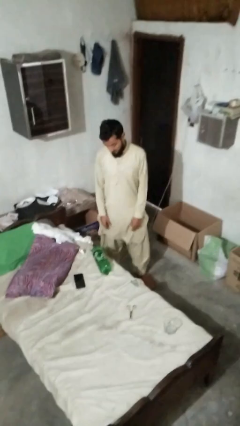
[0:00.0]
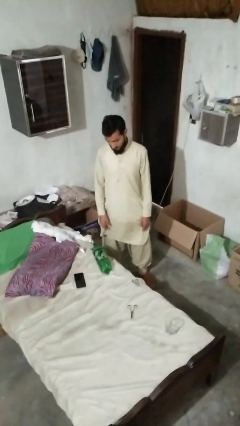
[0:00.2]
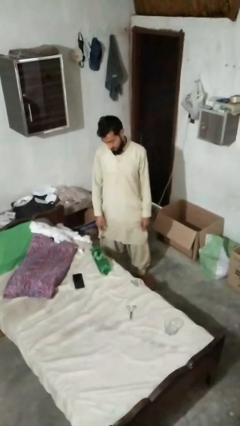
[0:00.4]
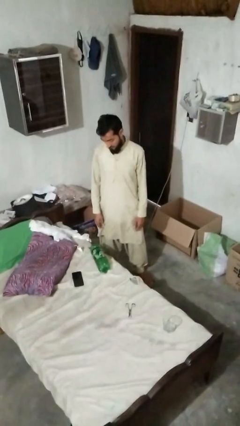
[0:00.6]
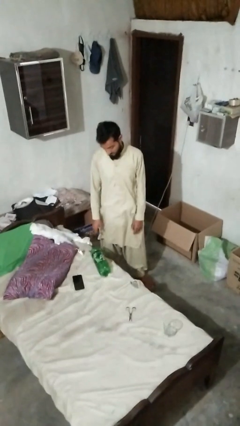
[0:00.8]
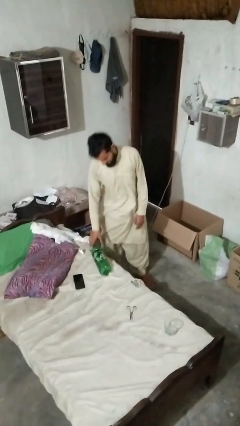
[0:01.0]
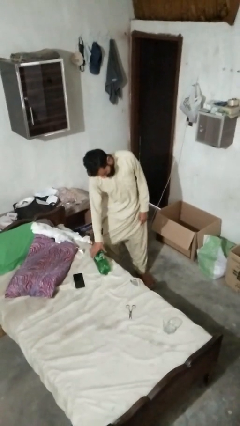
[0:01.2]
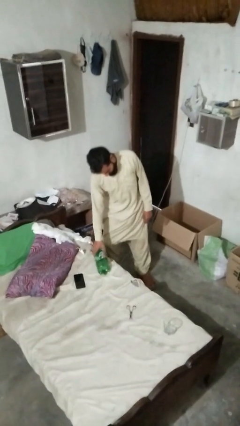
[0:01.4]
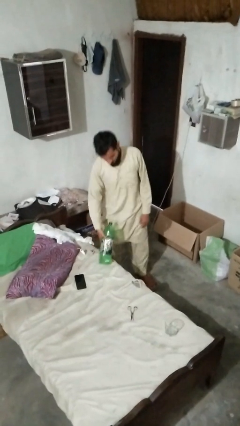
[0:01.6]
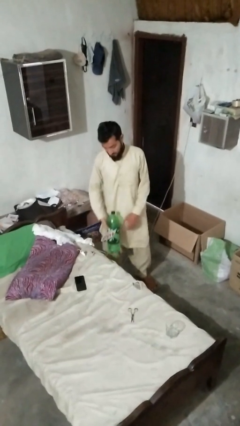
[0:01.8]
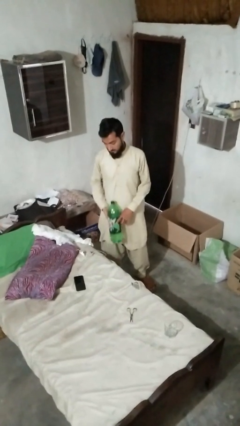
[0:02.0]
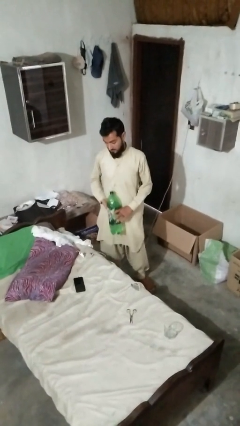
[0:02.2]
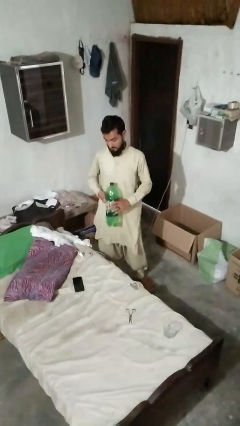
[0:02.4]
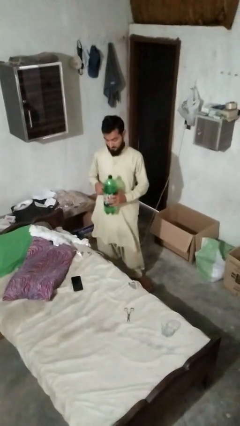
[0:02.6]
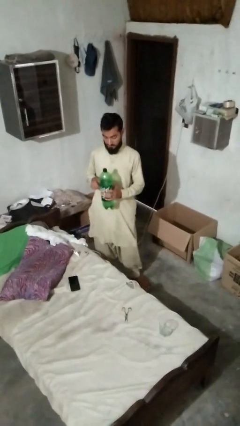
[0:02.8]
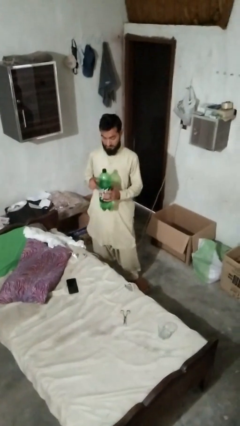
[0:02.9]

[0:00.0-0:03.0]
person picks up object from bed

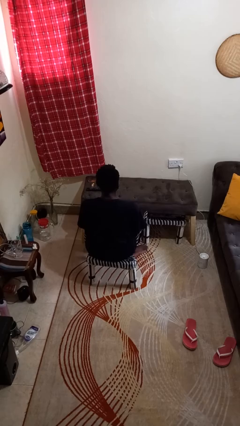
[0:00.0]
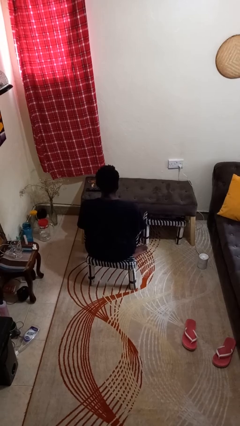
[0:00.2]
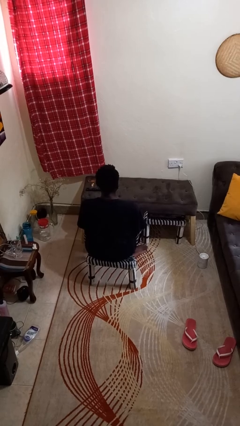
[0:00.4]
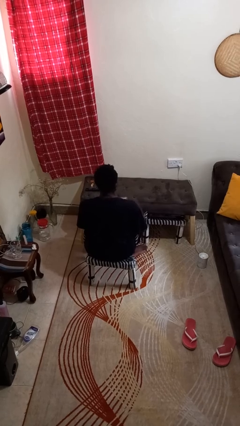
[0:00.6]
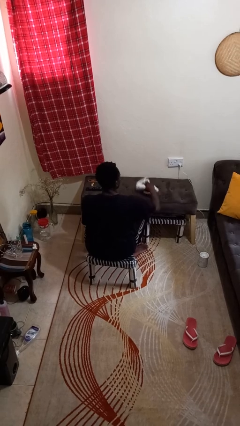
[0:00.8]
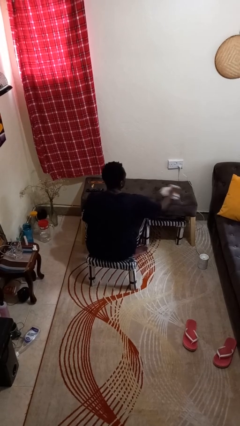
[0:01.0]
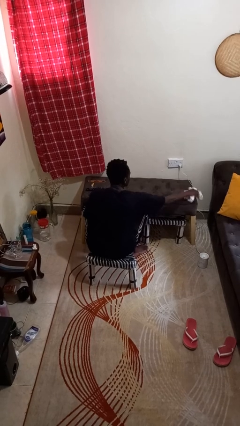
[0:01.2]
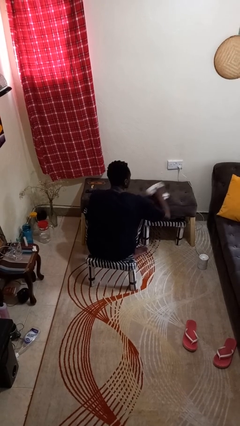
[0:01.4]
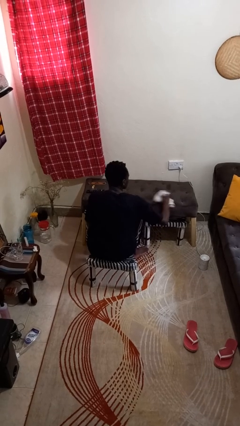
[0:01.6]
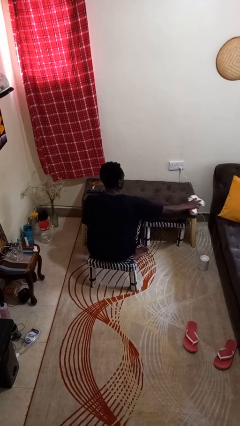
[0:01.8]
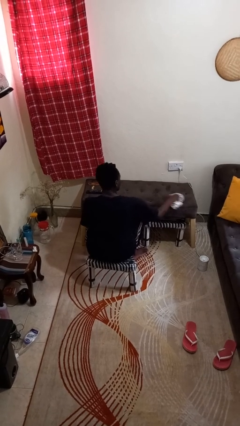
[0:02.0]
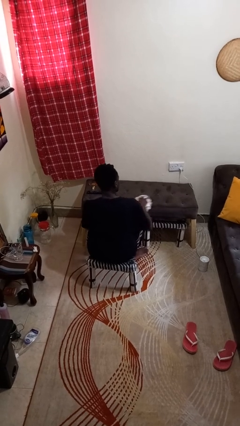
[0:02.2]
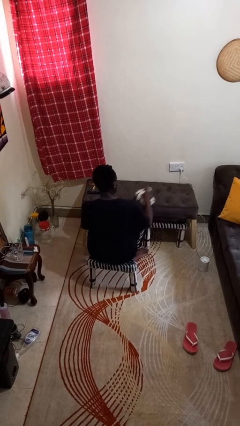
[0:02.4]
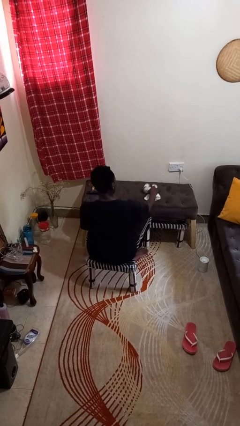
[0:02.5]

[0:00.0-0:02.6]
person cleans table with rag

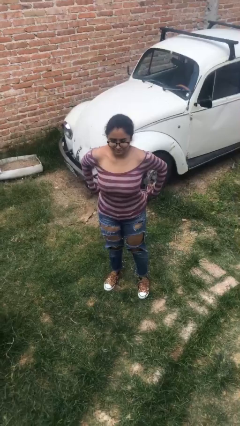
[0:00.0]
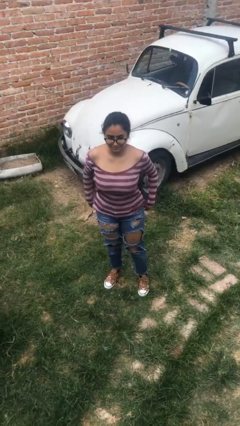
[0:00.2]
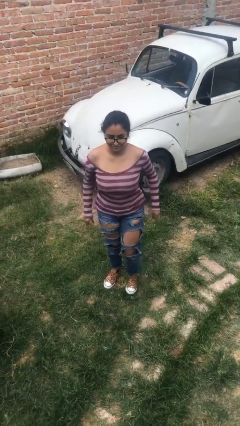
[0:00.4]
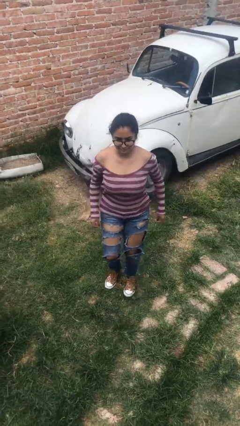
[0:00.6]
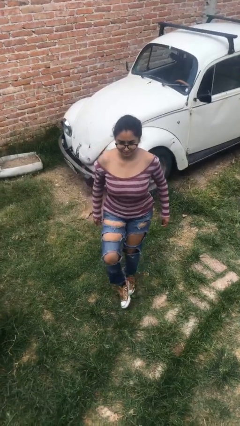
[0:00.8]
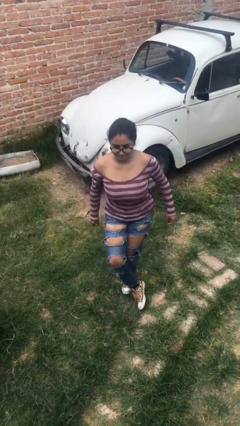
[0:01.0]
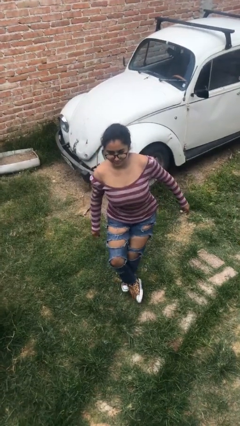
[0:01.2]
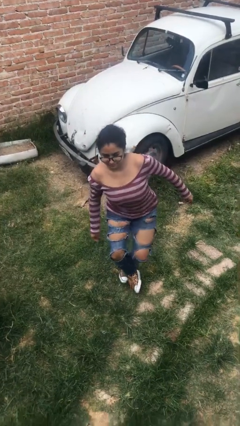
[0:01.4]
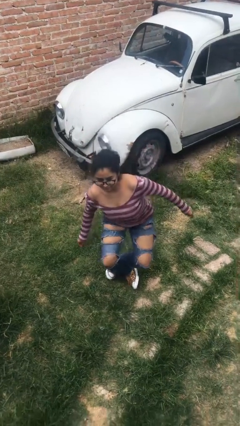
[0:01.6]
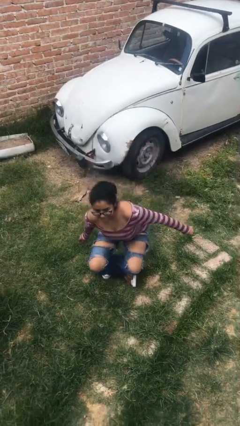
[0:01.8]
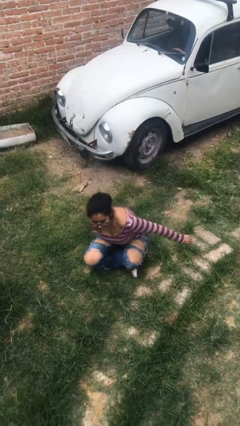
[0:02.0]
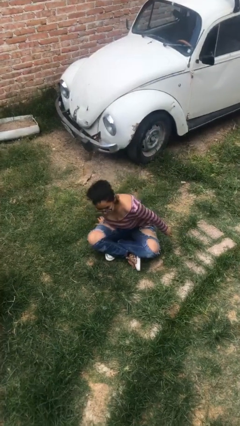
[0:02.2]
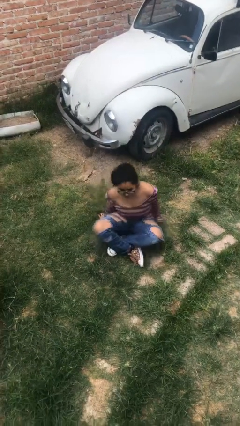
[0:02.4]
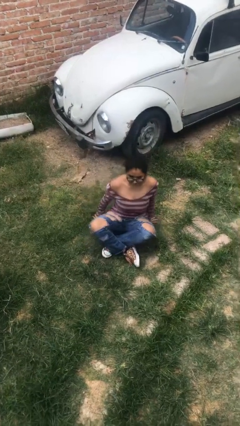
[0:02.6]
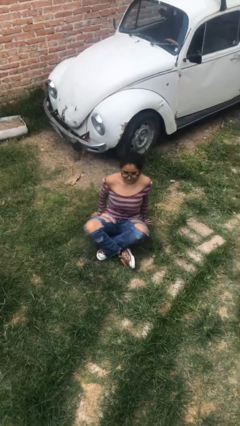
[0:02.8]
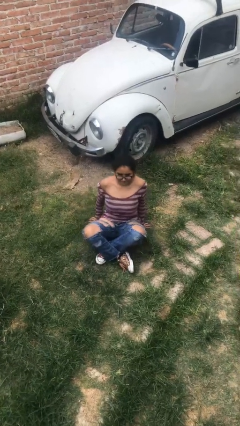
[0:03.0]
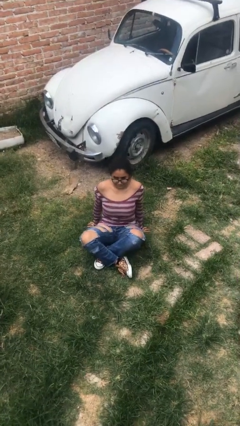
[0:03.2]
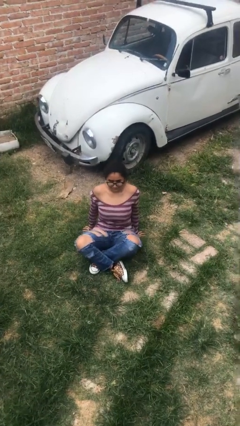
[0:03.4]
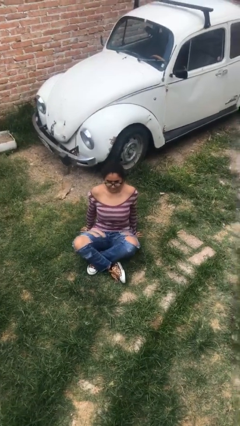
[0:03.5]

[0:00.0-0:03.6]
person sits crisscross

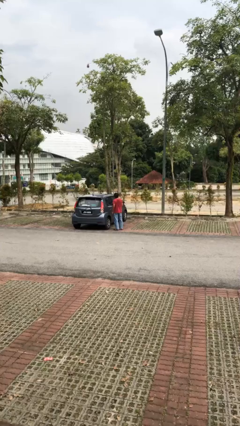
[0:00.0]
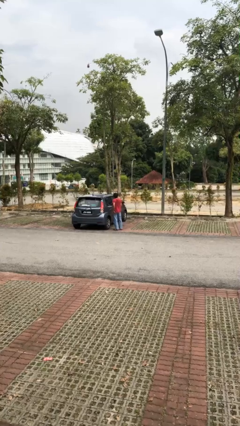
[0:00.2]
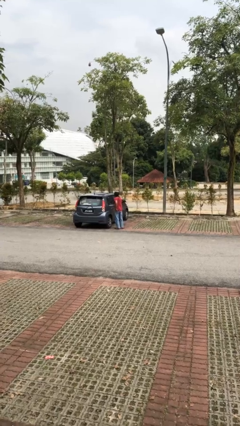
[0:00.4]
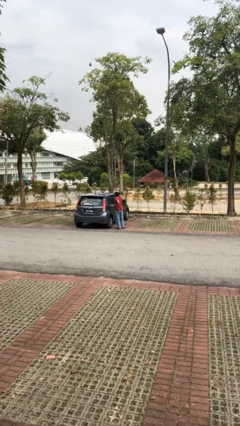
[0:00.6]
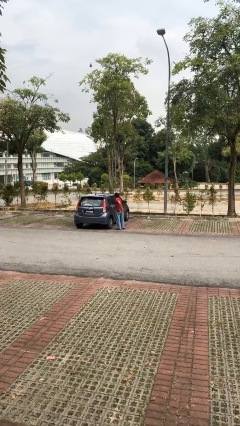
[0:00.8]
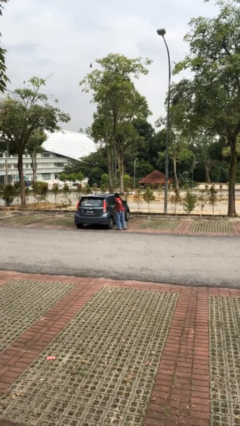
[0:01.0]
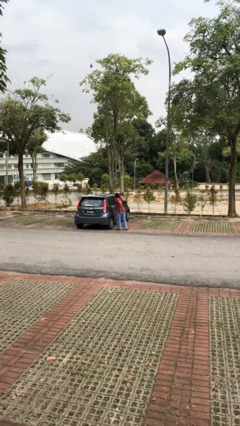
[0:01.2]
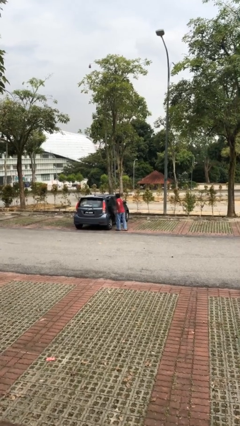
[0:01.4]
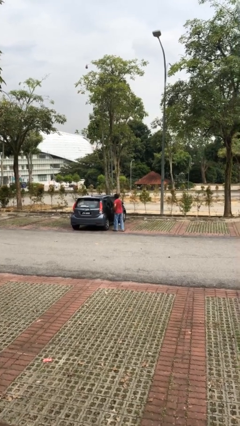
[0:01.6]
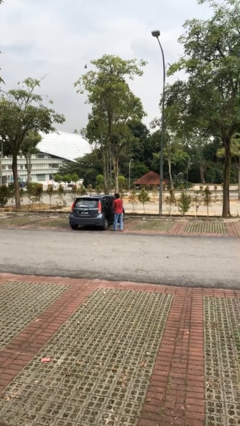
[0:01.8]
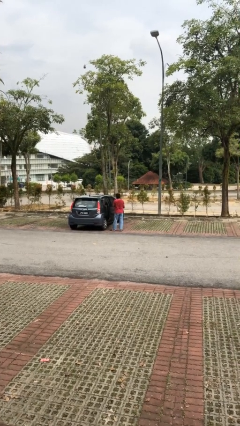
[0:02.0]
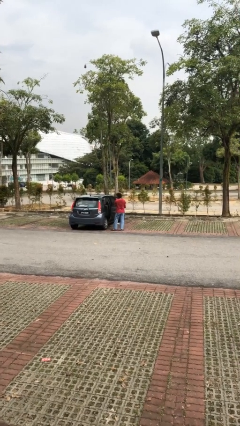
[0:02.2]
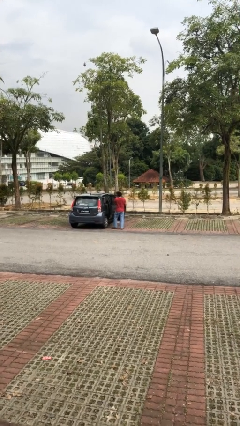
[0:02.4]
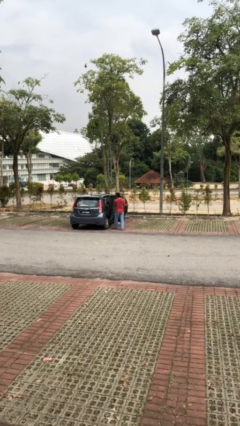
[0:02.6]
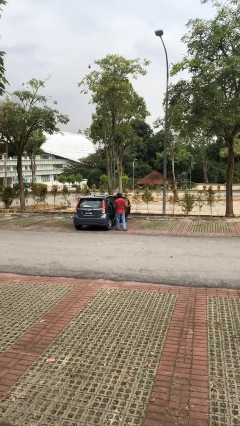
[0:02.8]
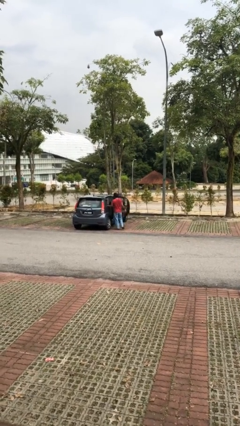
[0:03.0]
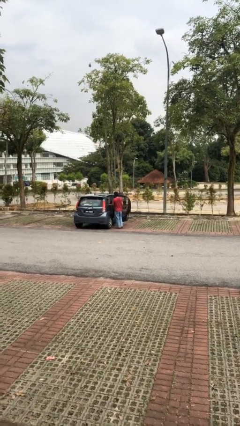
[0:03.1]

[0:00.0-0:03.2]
person opens car door

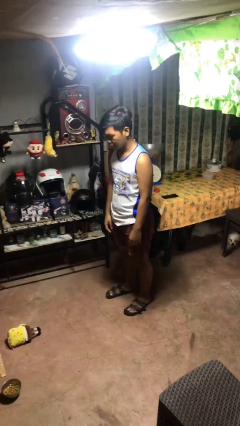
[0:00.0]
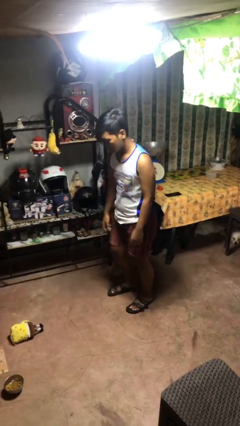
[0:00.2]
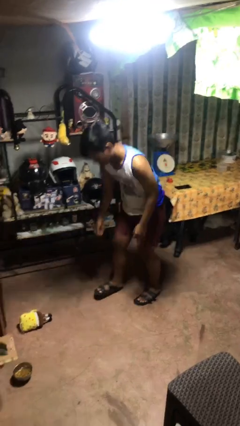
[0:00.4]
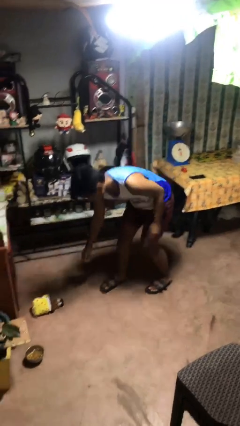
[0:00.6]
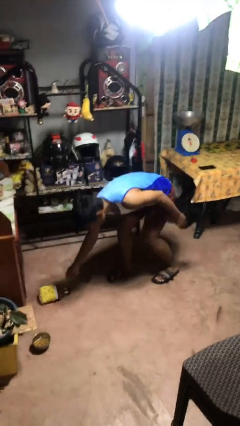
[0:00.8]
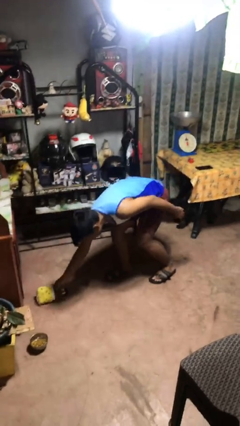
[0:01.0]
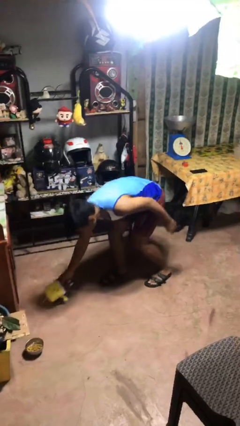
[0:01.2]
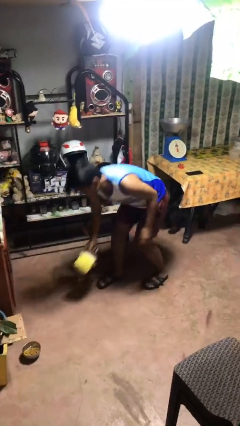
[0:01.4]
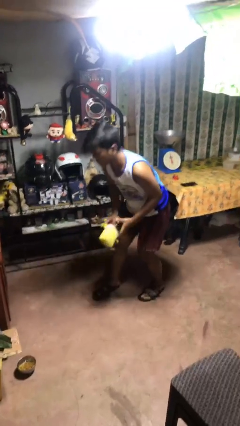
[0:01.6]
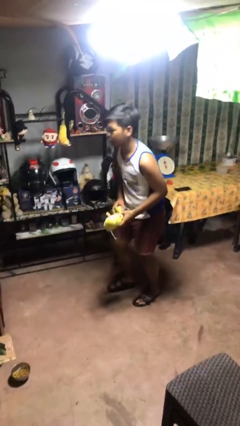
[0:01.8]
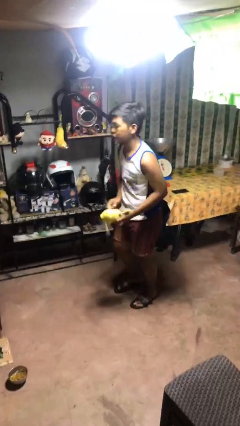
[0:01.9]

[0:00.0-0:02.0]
person picks up object from floor

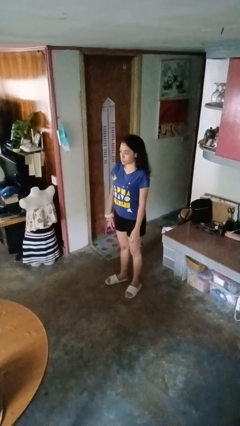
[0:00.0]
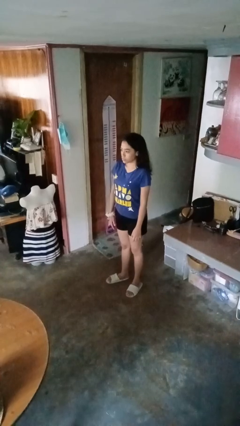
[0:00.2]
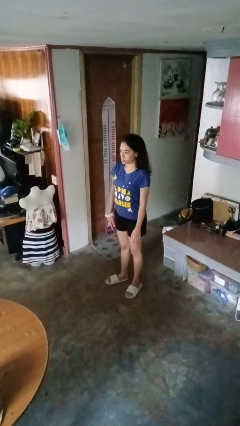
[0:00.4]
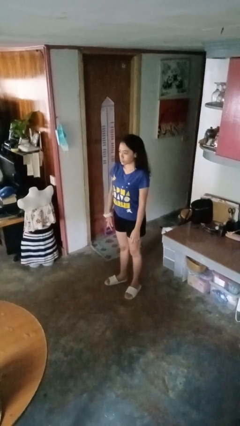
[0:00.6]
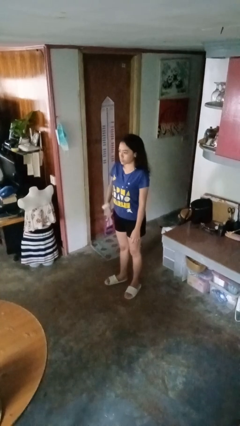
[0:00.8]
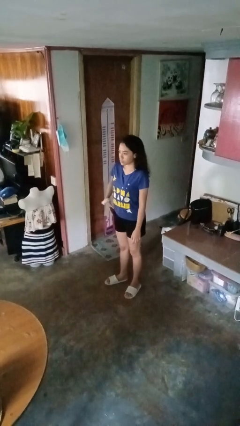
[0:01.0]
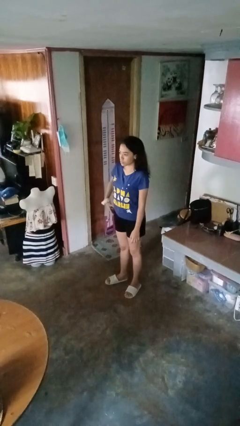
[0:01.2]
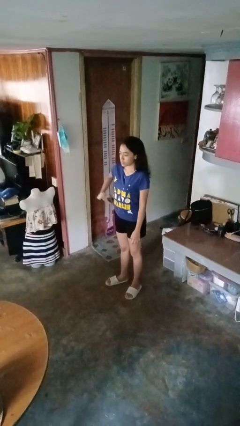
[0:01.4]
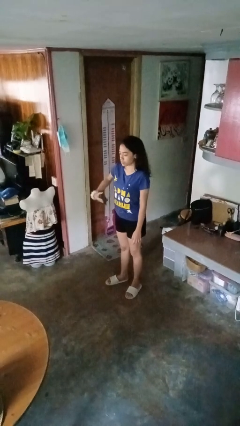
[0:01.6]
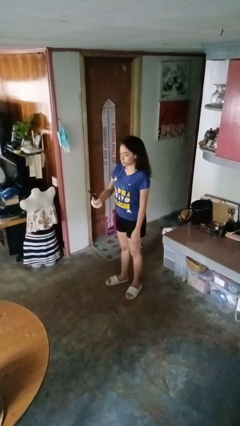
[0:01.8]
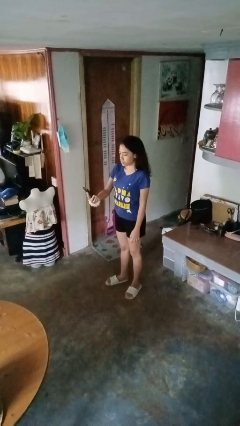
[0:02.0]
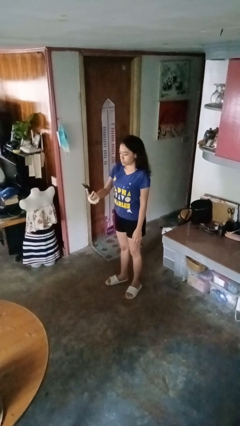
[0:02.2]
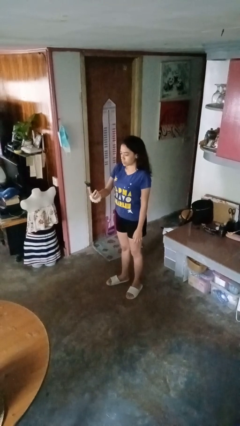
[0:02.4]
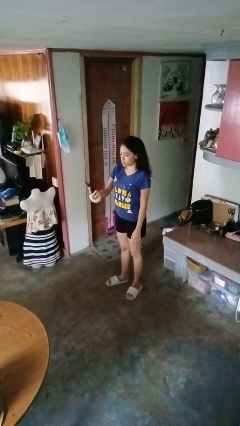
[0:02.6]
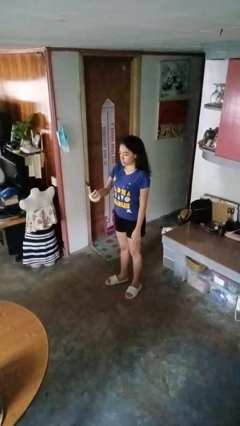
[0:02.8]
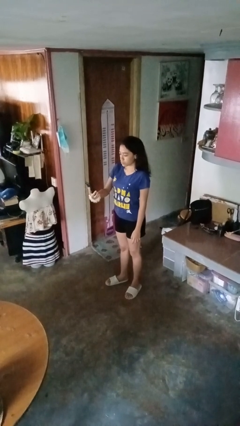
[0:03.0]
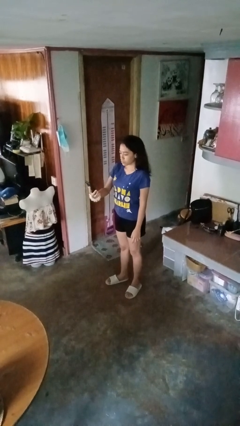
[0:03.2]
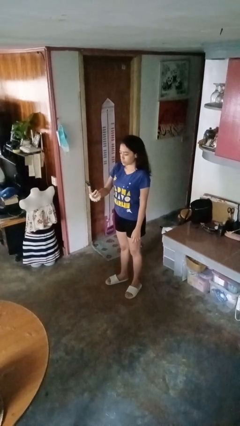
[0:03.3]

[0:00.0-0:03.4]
person takes phone from pocket
